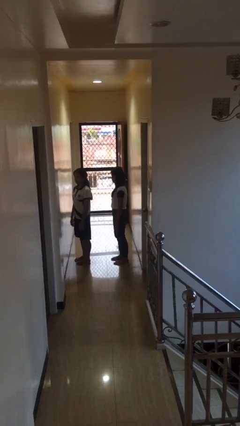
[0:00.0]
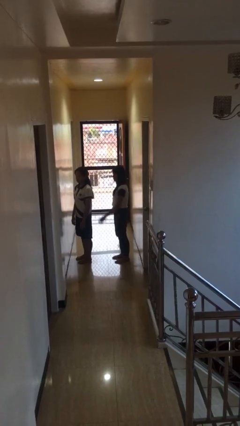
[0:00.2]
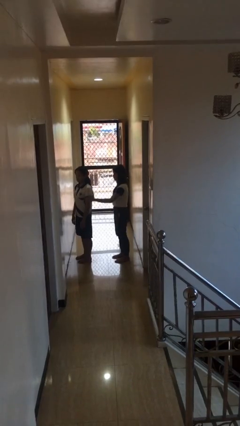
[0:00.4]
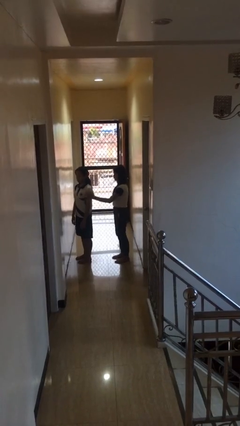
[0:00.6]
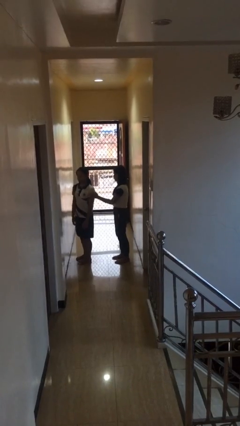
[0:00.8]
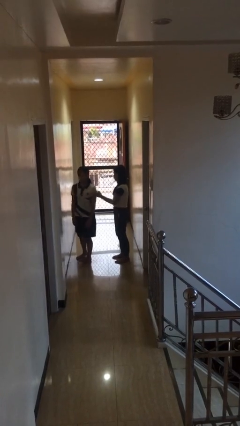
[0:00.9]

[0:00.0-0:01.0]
person grabs person by shoulder

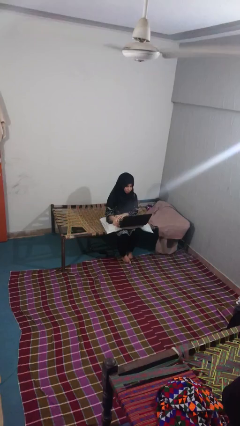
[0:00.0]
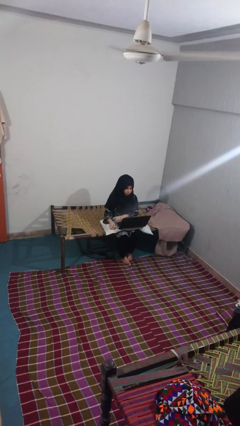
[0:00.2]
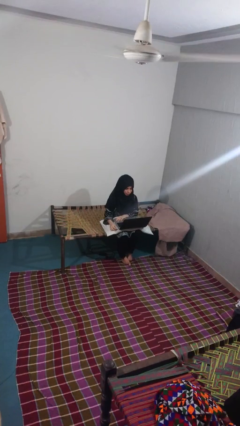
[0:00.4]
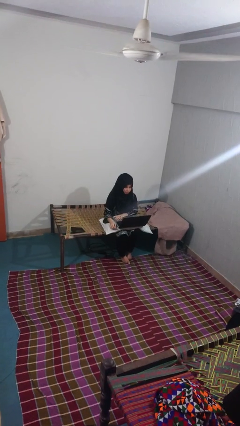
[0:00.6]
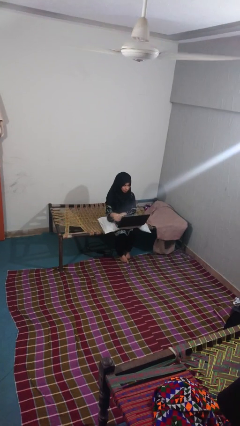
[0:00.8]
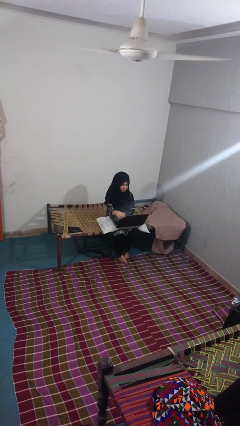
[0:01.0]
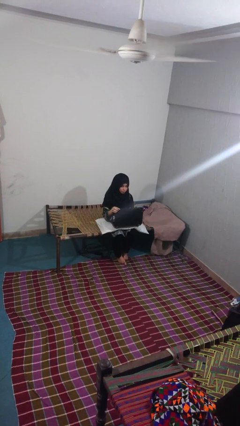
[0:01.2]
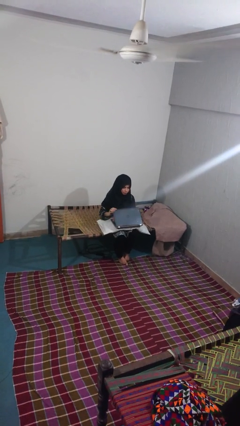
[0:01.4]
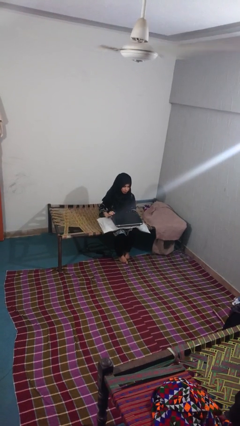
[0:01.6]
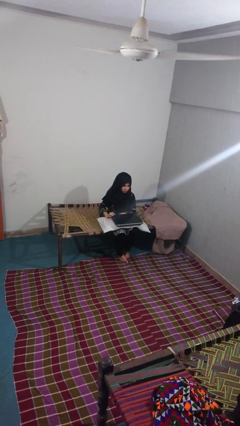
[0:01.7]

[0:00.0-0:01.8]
person closes laptop

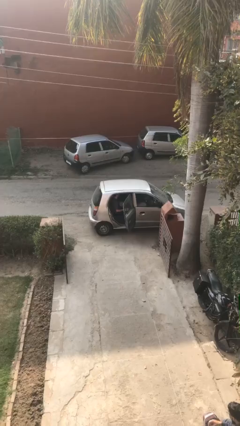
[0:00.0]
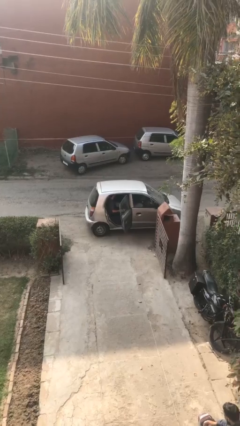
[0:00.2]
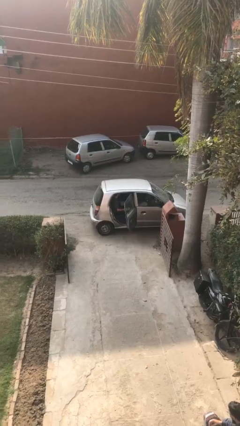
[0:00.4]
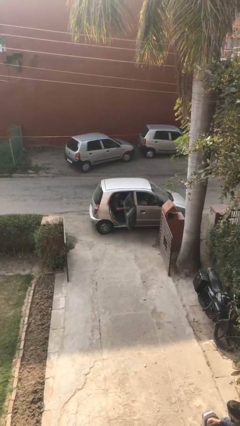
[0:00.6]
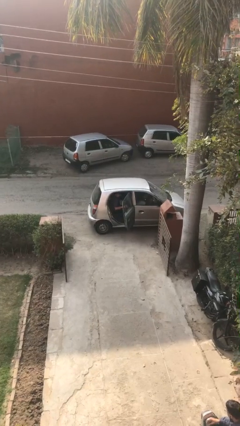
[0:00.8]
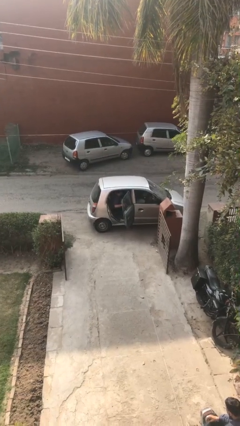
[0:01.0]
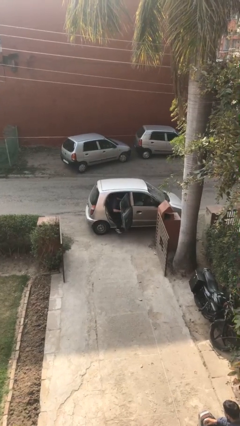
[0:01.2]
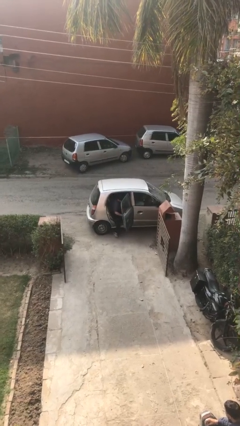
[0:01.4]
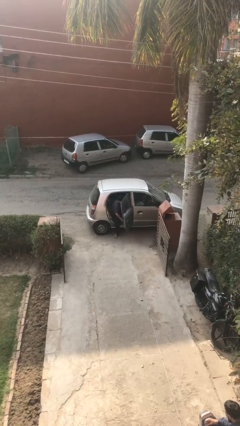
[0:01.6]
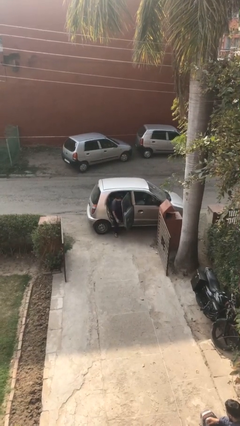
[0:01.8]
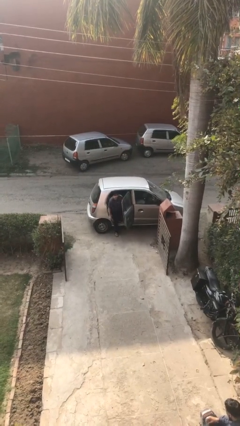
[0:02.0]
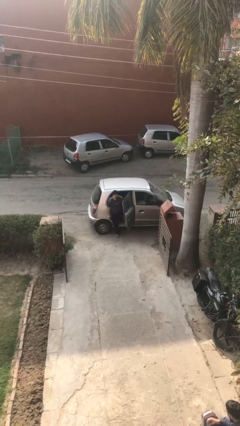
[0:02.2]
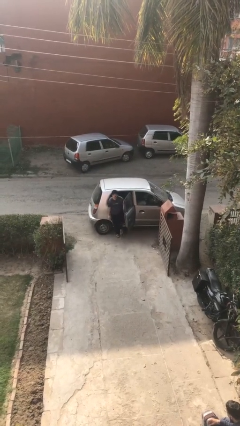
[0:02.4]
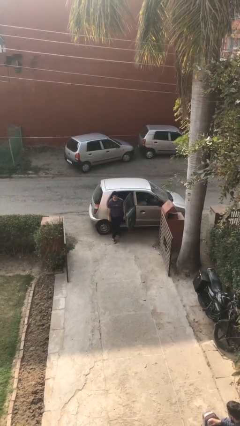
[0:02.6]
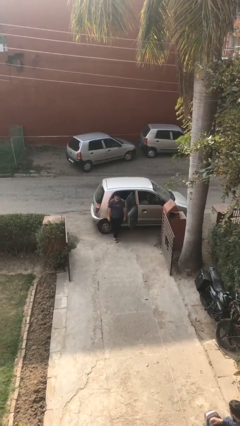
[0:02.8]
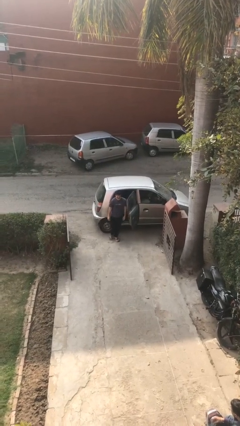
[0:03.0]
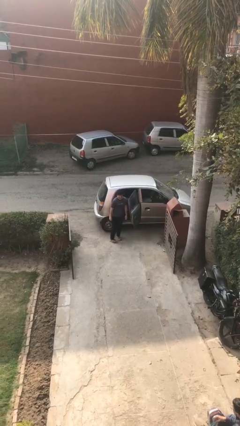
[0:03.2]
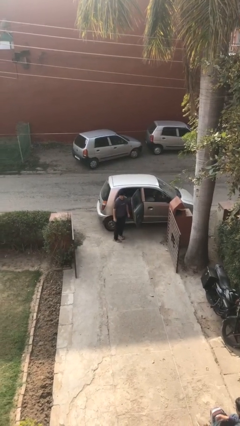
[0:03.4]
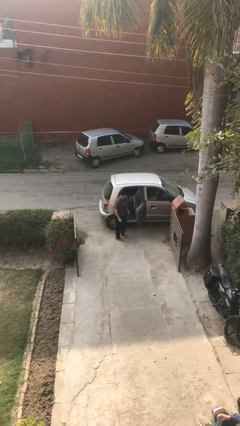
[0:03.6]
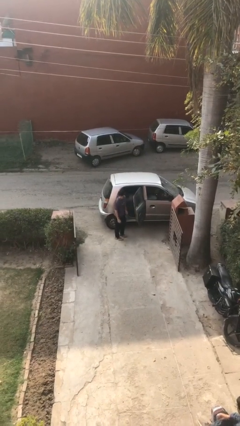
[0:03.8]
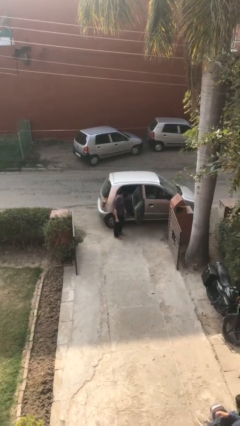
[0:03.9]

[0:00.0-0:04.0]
person exits car

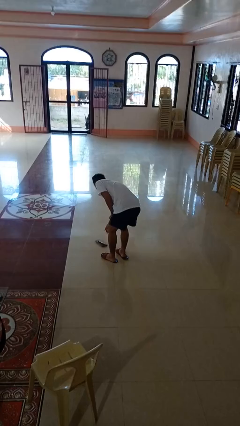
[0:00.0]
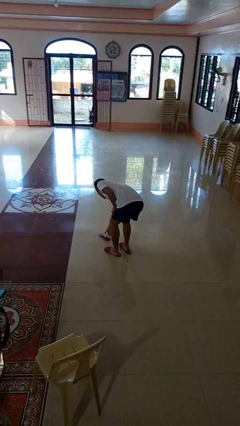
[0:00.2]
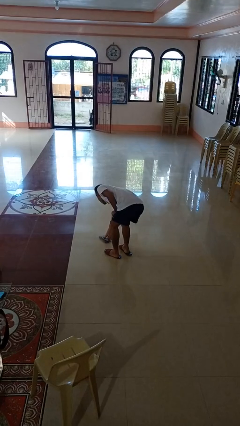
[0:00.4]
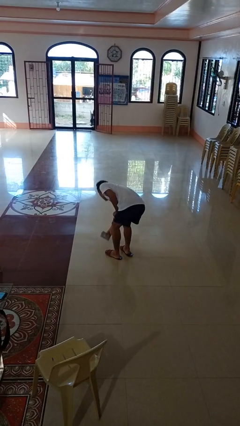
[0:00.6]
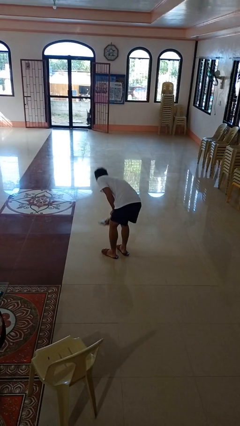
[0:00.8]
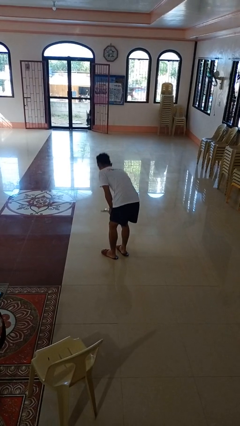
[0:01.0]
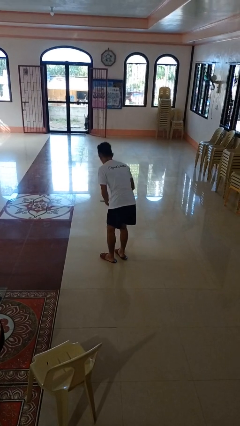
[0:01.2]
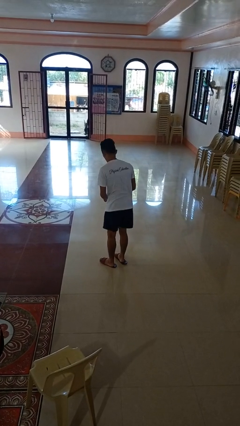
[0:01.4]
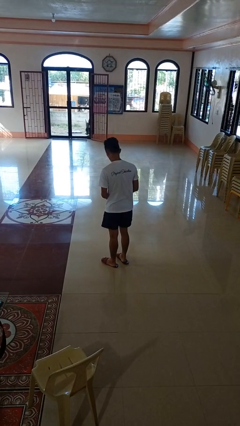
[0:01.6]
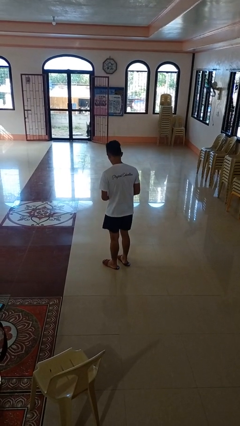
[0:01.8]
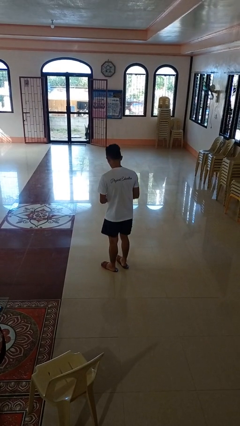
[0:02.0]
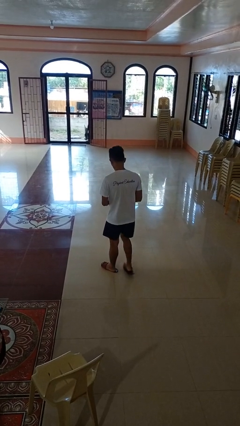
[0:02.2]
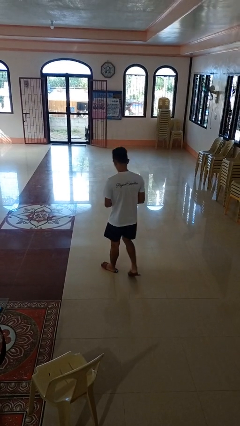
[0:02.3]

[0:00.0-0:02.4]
person picks up object from floor

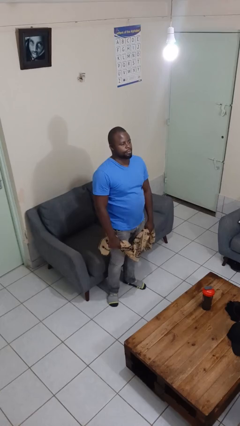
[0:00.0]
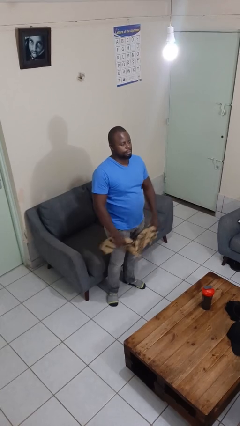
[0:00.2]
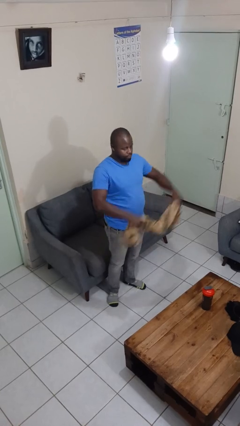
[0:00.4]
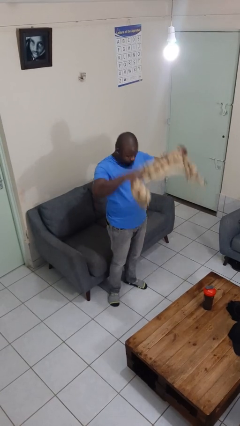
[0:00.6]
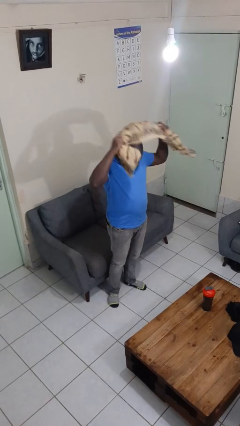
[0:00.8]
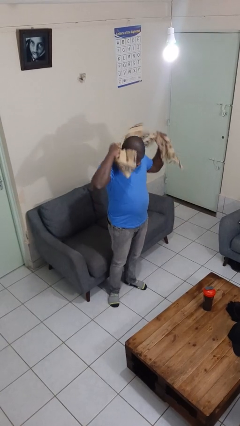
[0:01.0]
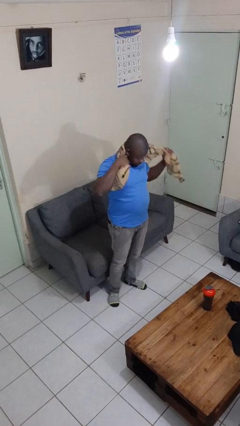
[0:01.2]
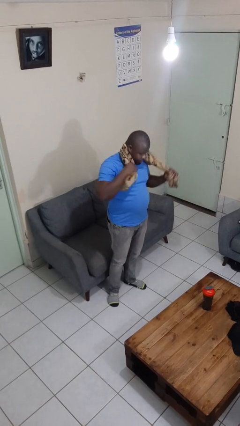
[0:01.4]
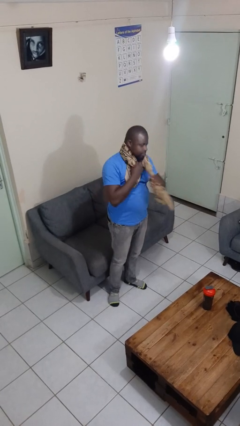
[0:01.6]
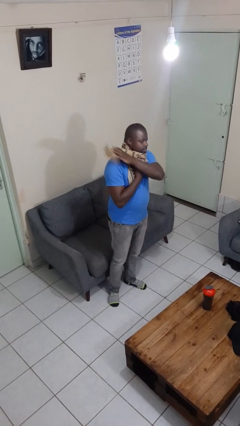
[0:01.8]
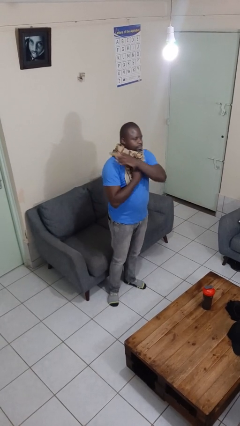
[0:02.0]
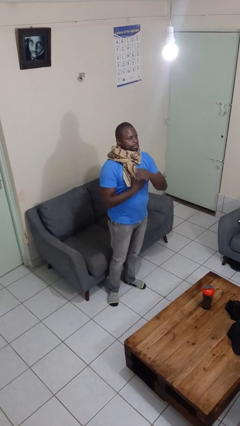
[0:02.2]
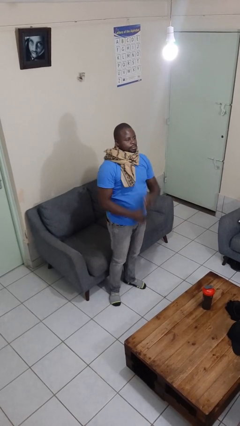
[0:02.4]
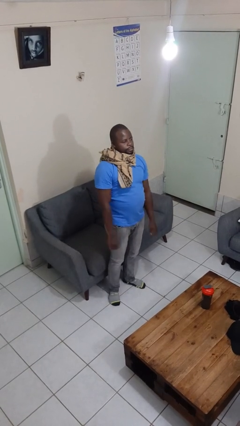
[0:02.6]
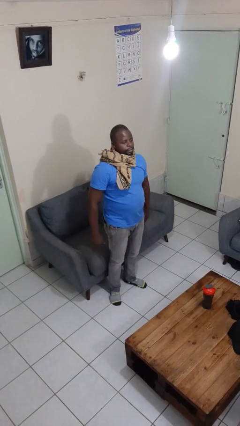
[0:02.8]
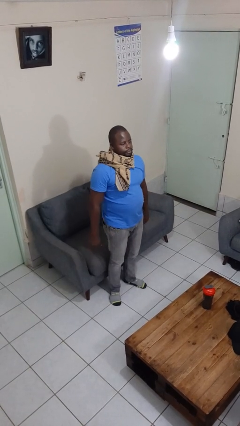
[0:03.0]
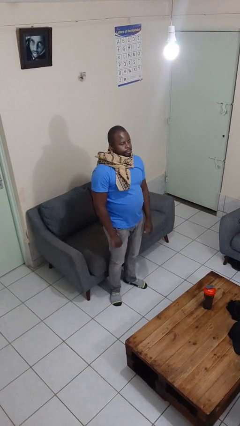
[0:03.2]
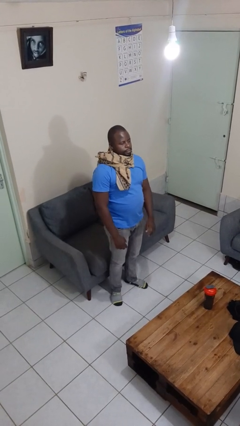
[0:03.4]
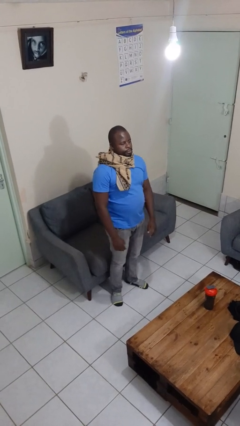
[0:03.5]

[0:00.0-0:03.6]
person puts on scarf

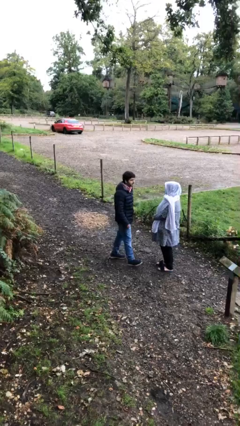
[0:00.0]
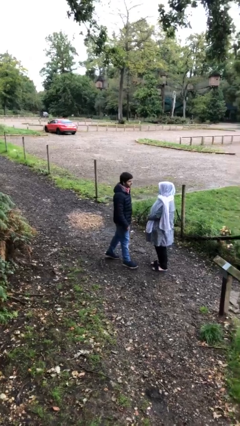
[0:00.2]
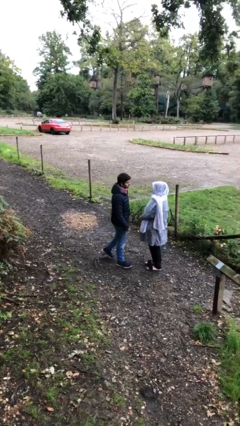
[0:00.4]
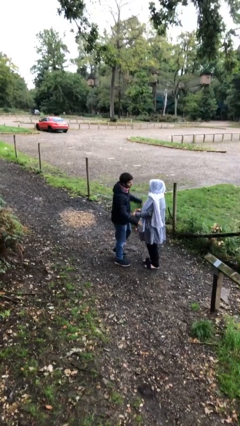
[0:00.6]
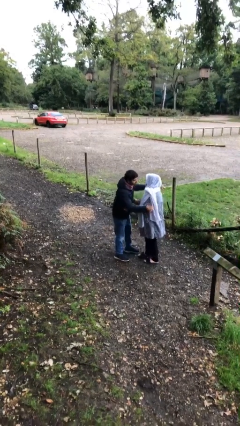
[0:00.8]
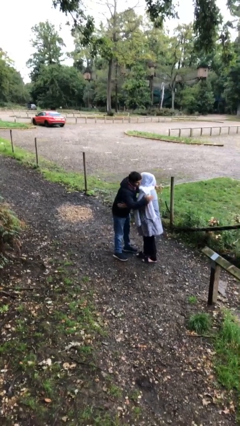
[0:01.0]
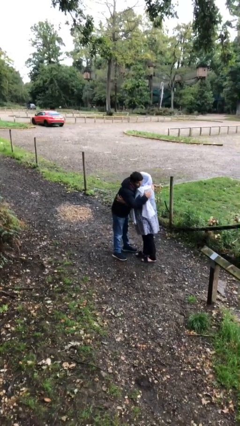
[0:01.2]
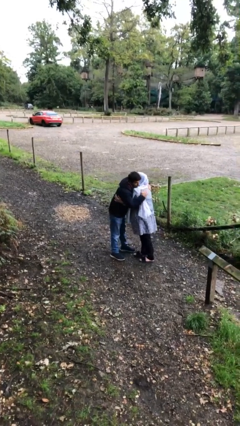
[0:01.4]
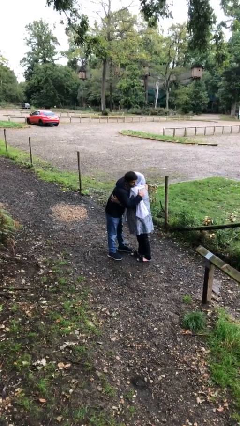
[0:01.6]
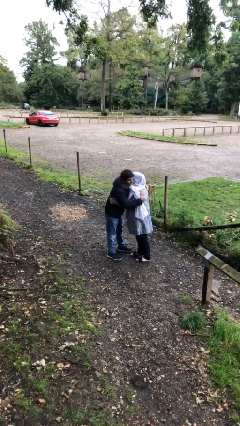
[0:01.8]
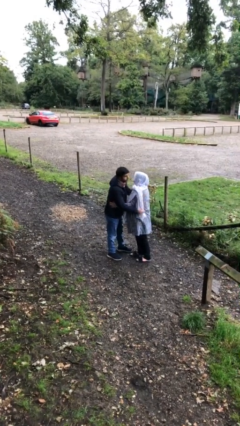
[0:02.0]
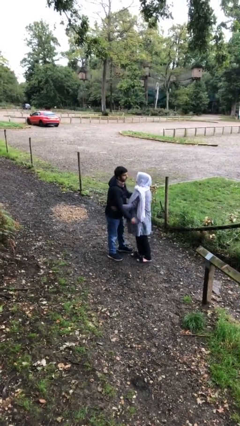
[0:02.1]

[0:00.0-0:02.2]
person embraces person

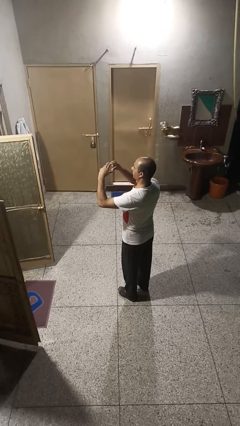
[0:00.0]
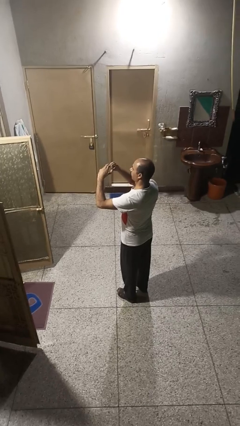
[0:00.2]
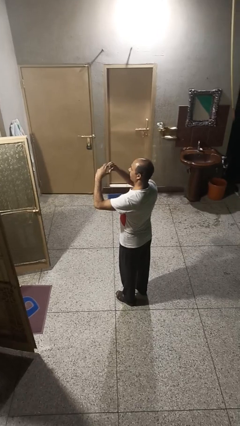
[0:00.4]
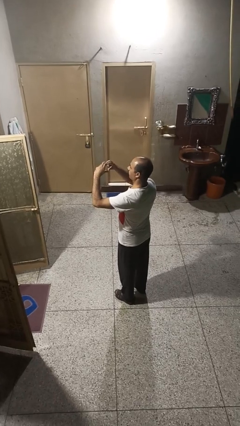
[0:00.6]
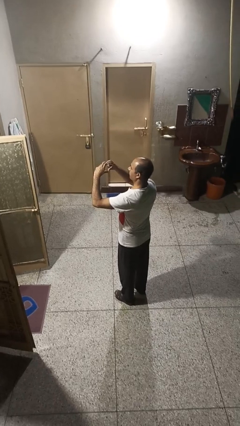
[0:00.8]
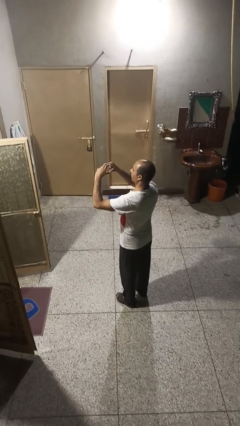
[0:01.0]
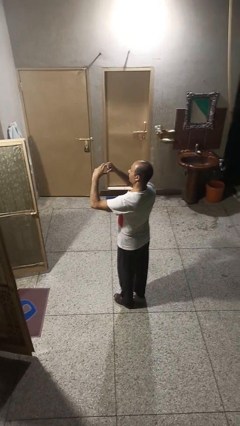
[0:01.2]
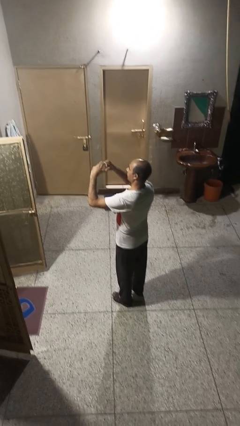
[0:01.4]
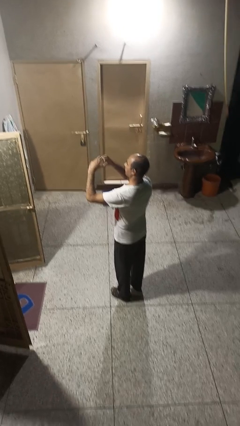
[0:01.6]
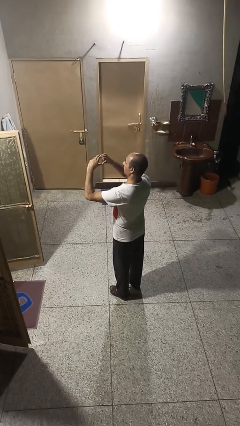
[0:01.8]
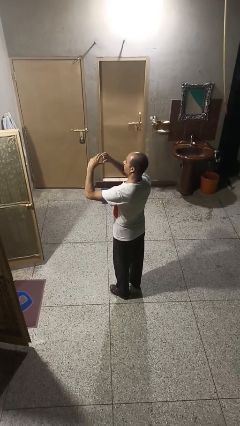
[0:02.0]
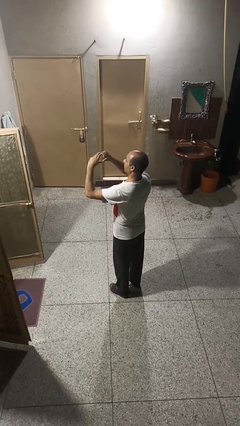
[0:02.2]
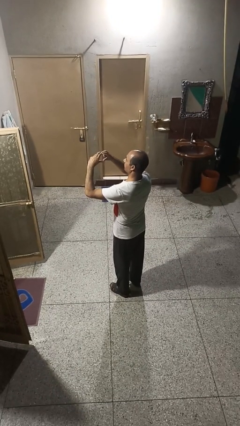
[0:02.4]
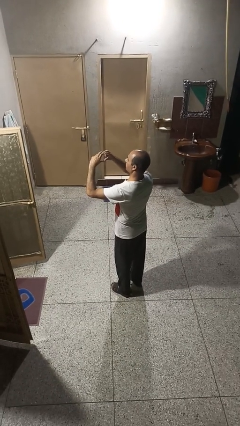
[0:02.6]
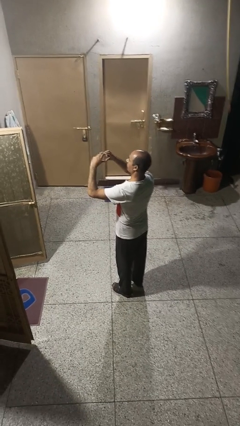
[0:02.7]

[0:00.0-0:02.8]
person gestures heart
